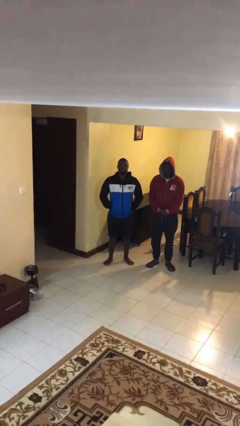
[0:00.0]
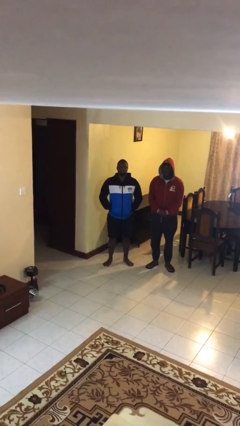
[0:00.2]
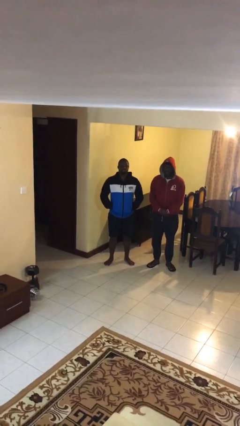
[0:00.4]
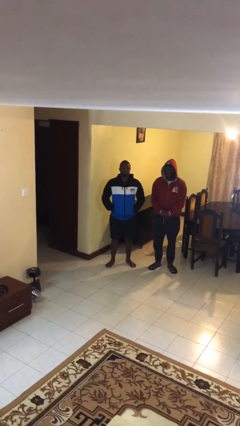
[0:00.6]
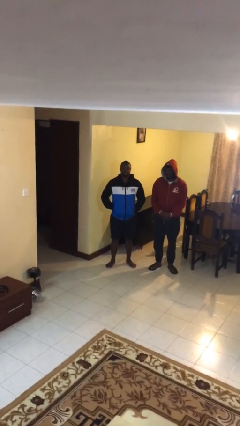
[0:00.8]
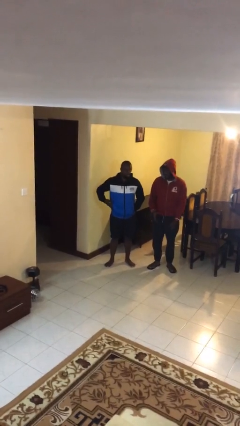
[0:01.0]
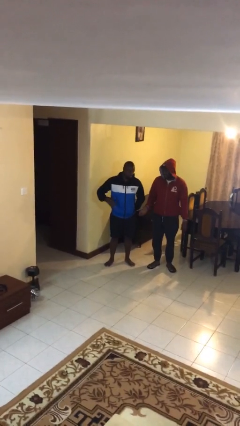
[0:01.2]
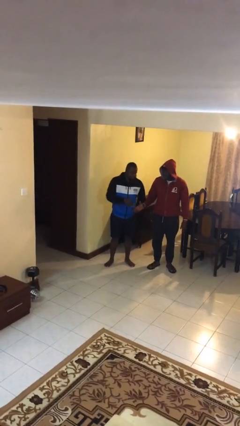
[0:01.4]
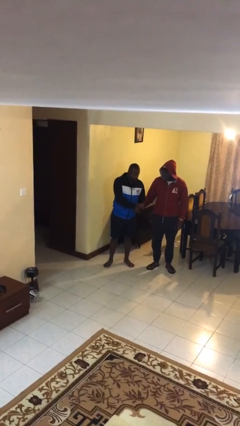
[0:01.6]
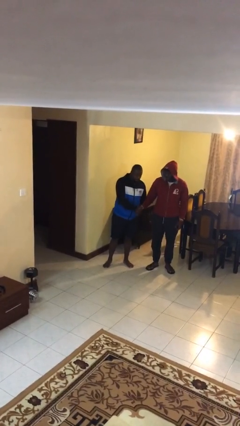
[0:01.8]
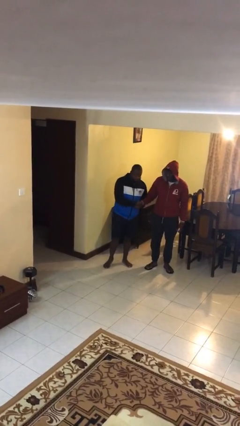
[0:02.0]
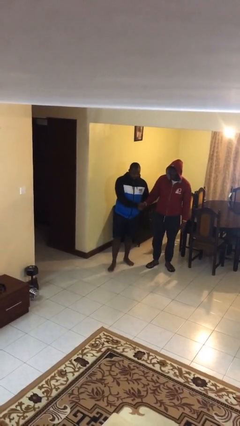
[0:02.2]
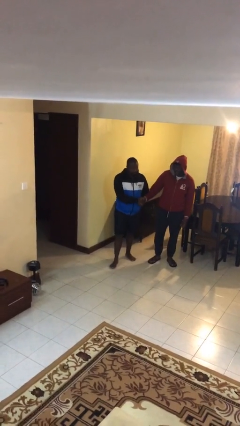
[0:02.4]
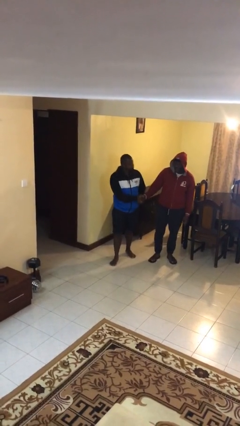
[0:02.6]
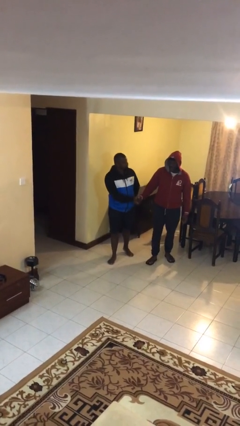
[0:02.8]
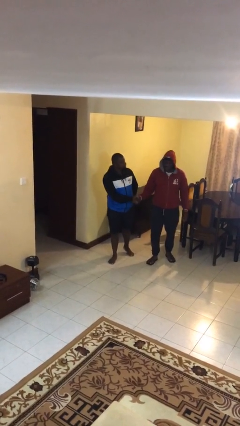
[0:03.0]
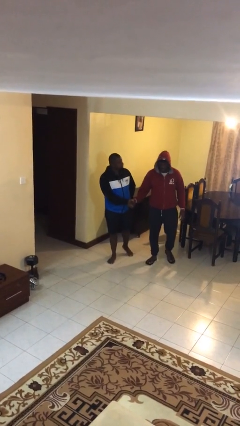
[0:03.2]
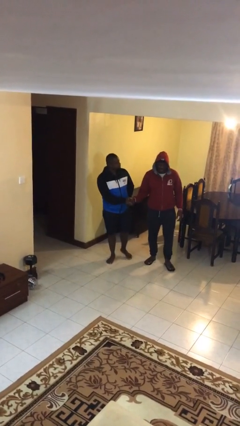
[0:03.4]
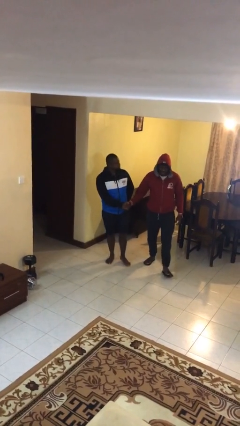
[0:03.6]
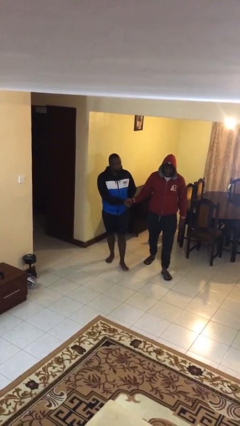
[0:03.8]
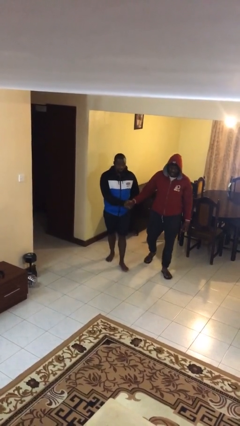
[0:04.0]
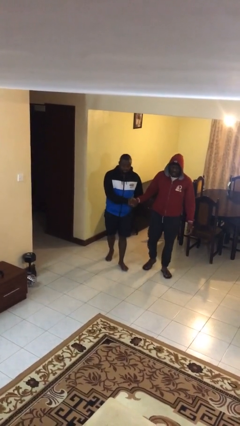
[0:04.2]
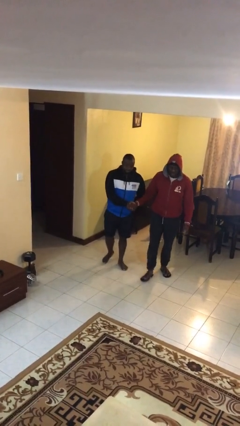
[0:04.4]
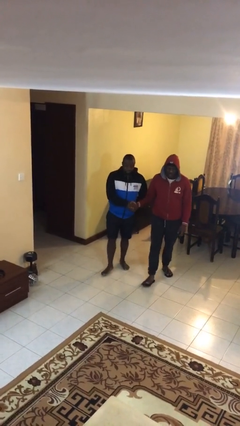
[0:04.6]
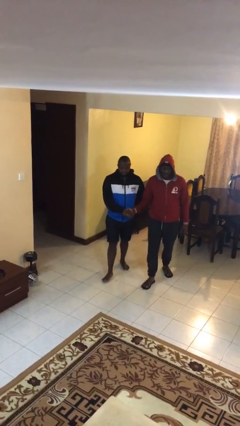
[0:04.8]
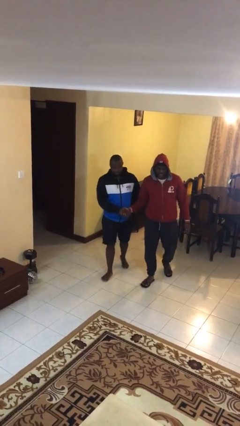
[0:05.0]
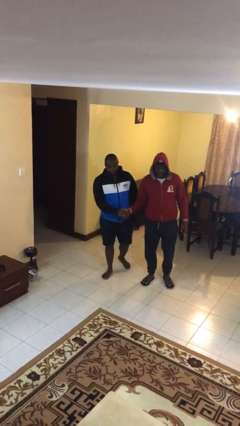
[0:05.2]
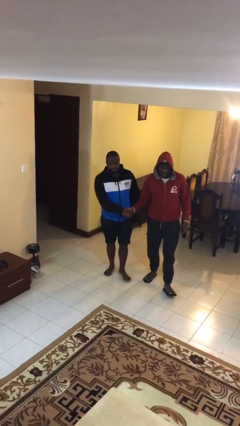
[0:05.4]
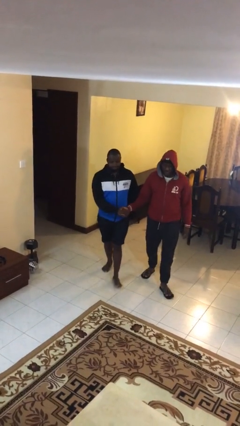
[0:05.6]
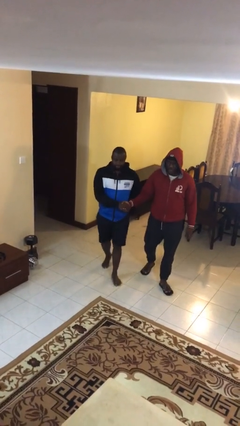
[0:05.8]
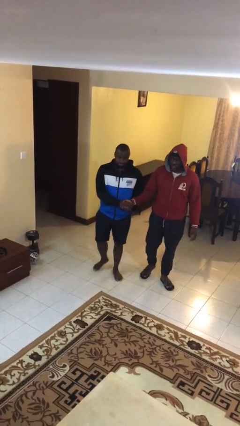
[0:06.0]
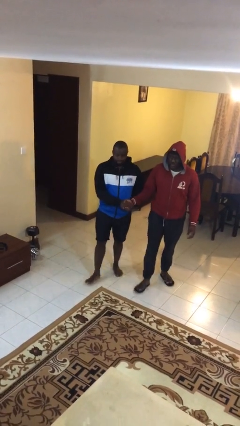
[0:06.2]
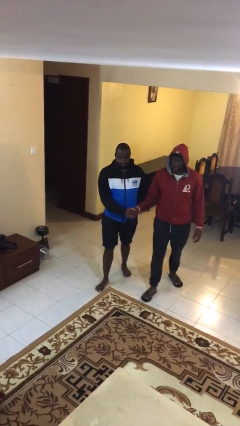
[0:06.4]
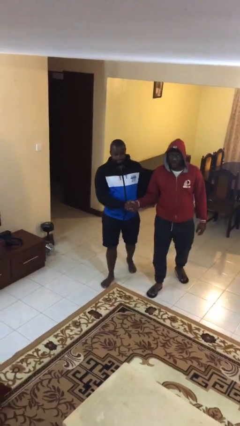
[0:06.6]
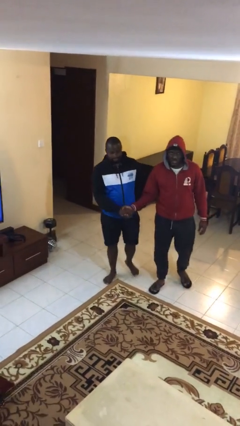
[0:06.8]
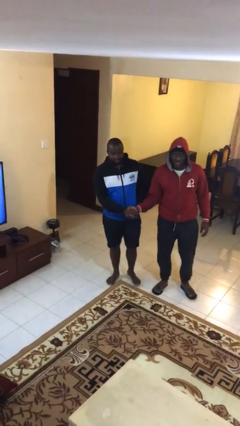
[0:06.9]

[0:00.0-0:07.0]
person holds hand

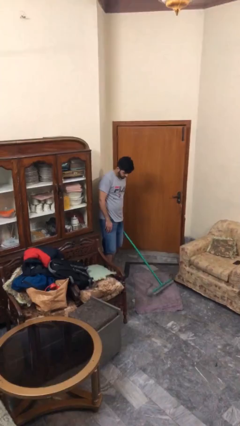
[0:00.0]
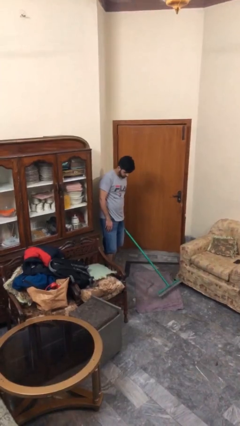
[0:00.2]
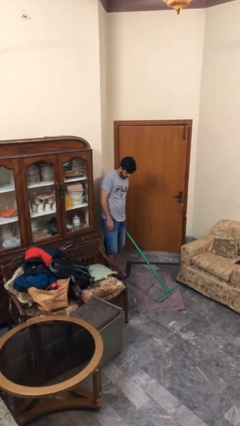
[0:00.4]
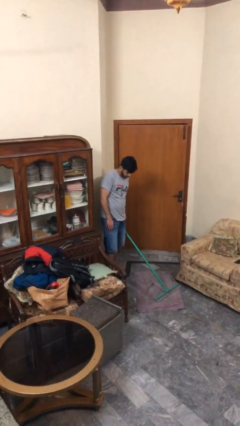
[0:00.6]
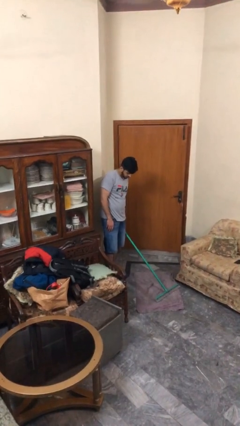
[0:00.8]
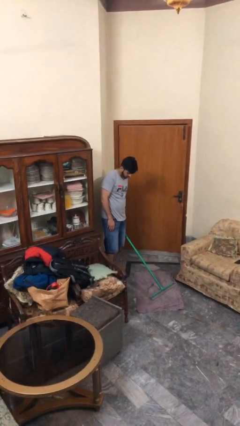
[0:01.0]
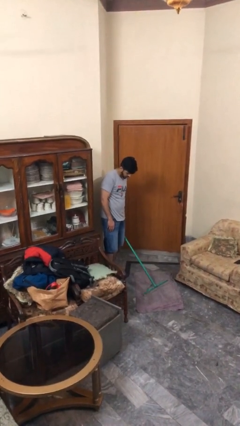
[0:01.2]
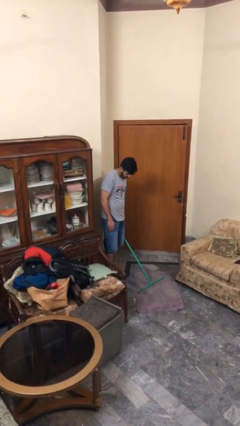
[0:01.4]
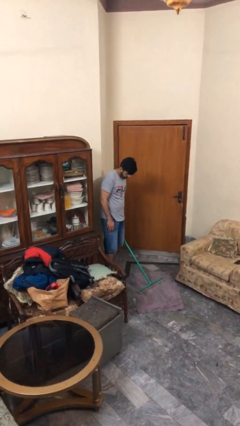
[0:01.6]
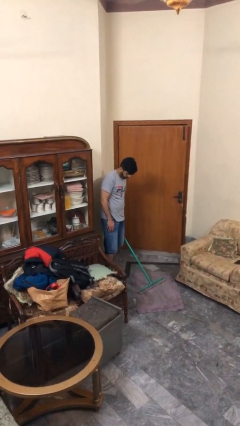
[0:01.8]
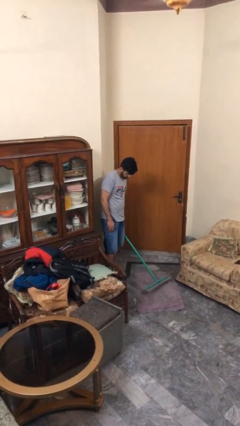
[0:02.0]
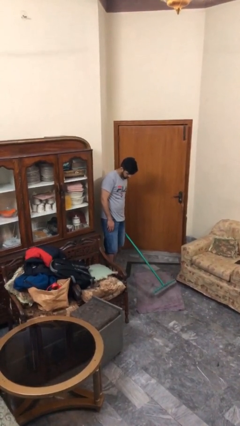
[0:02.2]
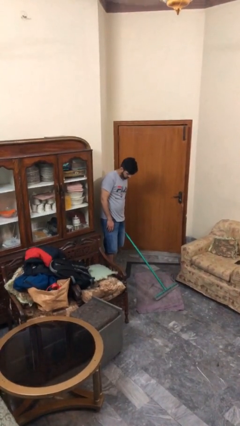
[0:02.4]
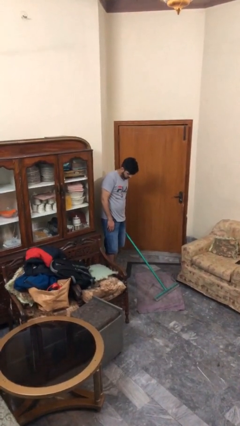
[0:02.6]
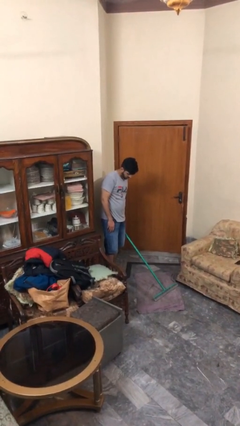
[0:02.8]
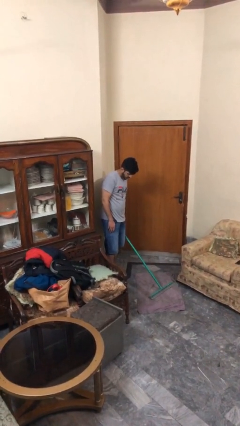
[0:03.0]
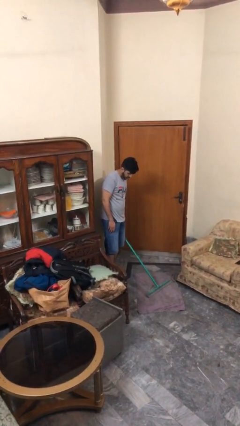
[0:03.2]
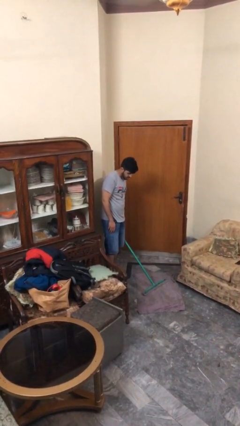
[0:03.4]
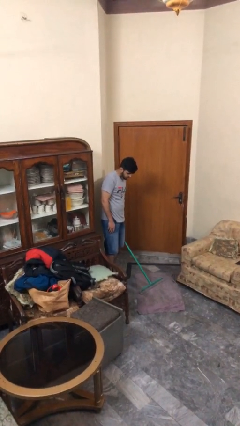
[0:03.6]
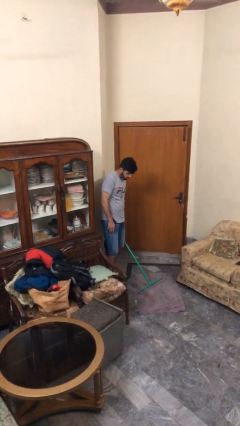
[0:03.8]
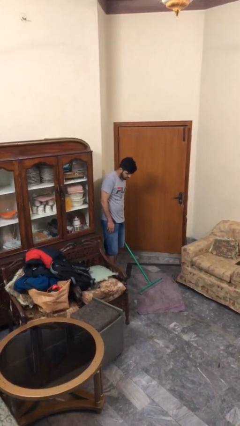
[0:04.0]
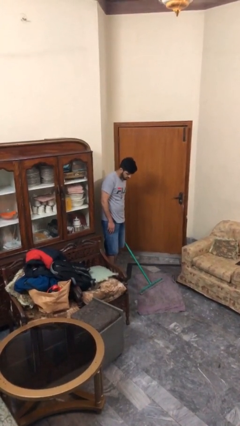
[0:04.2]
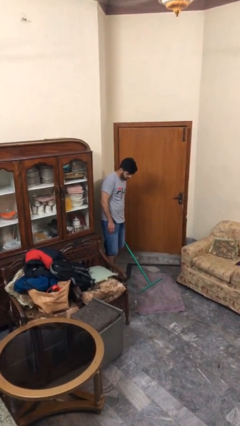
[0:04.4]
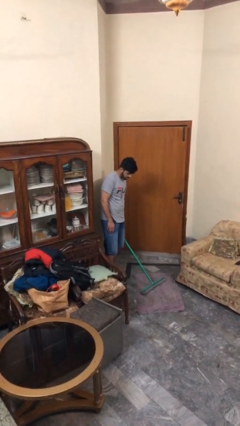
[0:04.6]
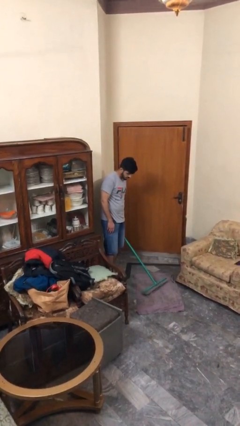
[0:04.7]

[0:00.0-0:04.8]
person vacuums carpet

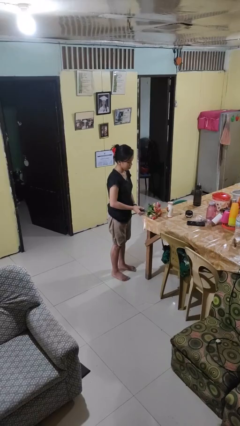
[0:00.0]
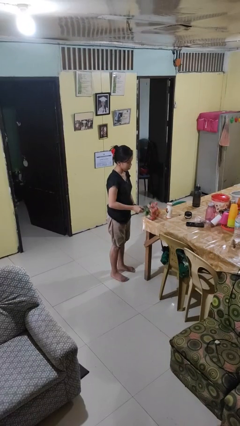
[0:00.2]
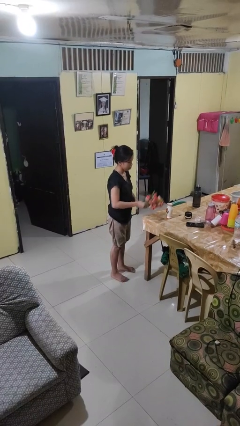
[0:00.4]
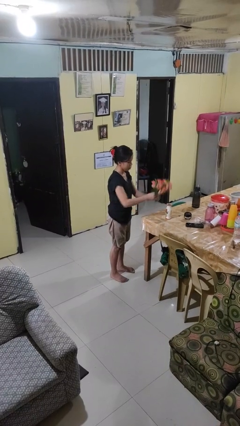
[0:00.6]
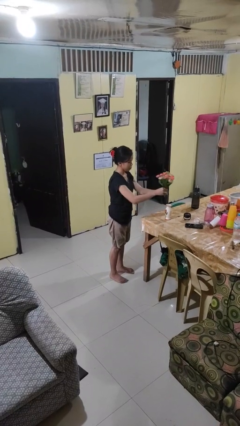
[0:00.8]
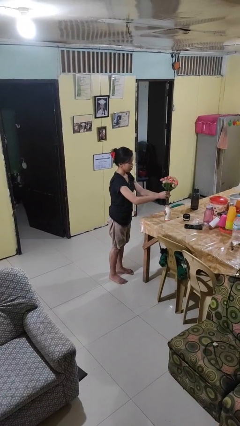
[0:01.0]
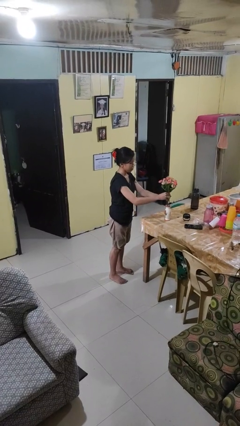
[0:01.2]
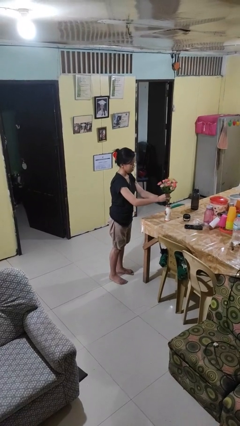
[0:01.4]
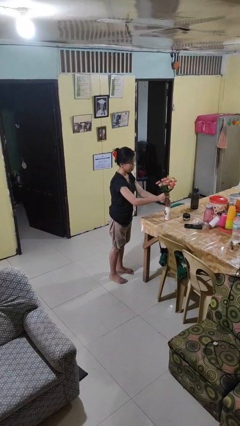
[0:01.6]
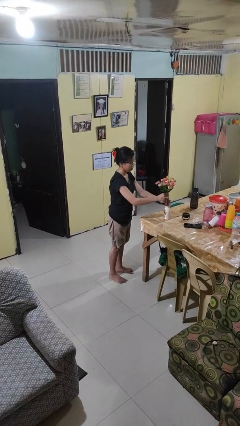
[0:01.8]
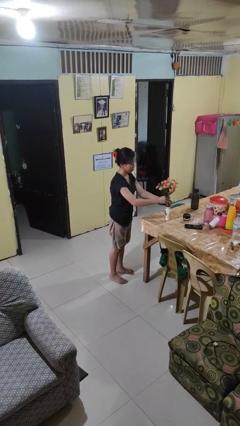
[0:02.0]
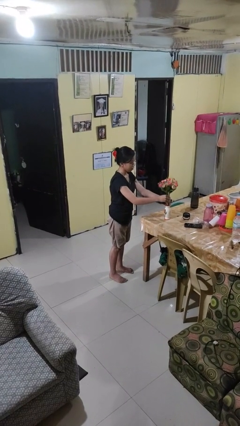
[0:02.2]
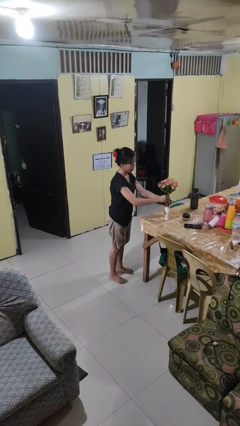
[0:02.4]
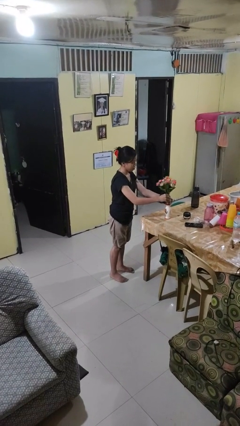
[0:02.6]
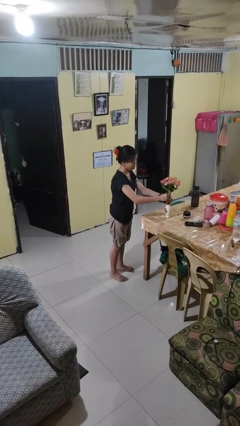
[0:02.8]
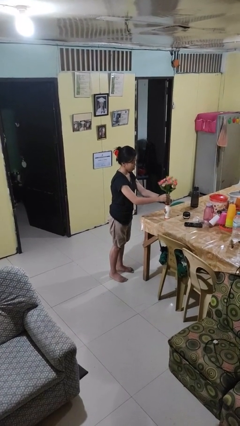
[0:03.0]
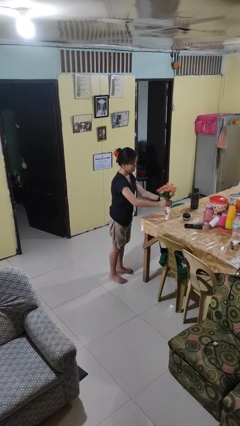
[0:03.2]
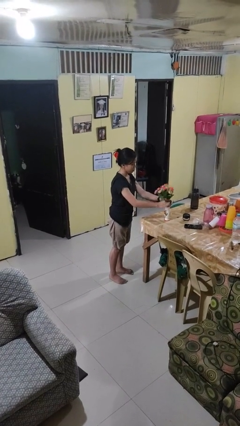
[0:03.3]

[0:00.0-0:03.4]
person arranges flowers in vase

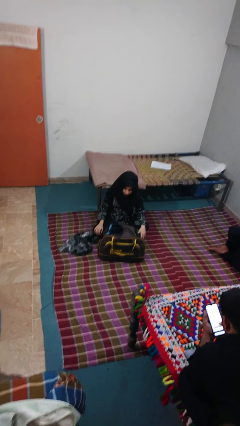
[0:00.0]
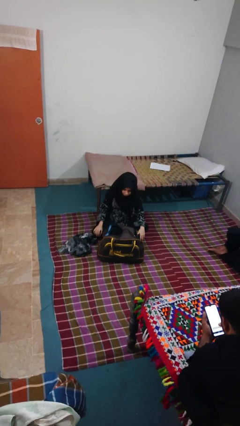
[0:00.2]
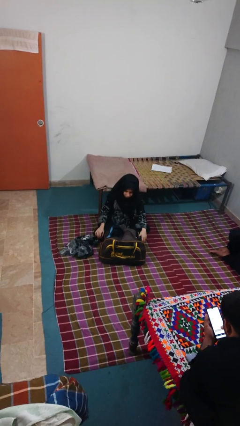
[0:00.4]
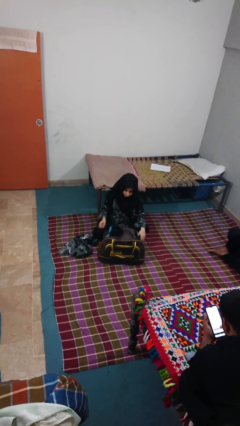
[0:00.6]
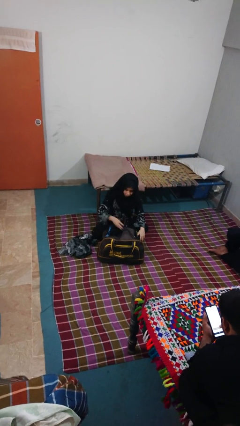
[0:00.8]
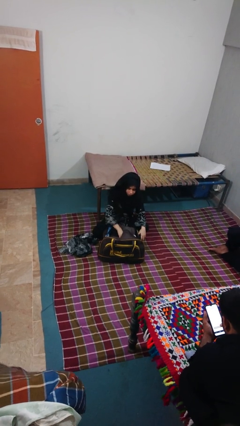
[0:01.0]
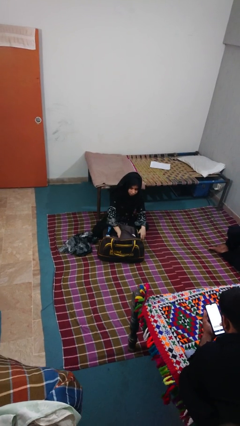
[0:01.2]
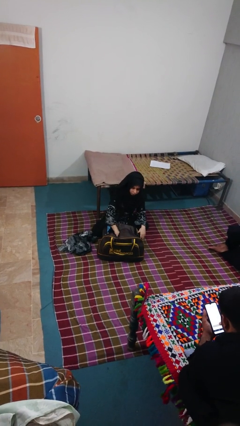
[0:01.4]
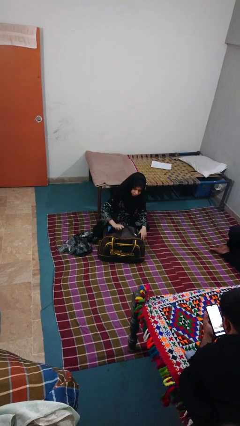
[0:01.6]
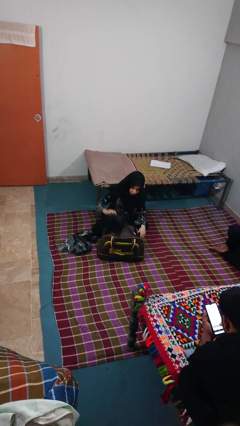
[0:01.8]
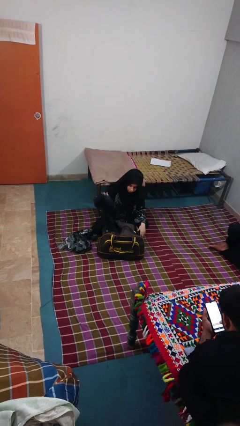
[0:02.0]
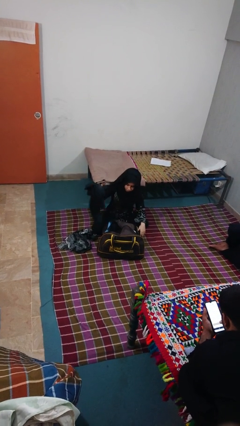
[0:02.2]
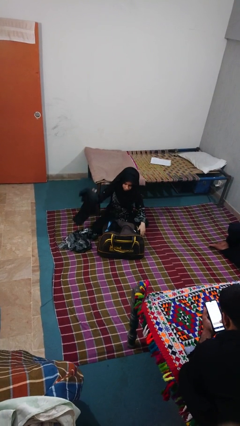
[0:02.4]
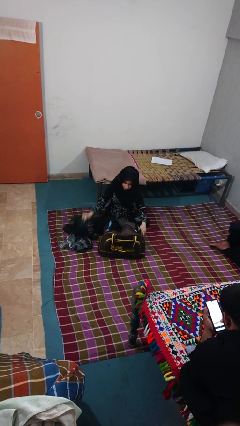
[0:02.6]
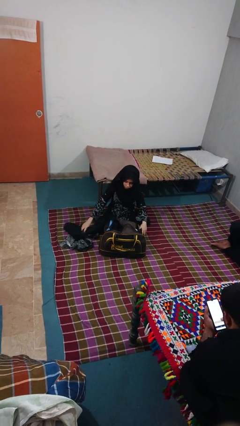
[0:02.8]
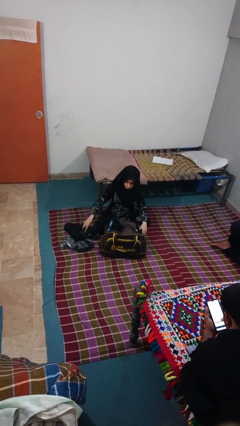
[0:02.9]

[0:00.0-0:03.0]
person unloads clothes from suitcase

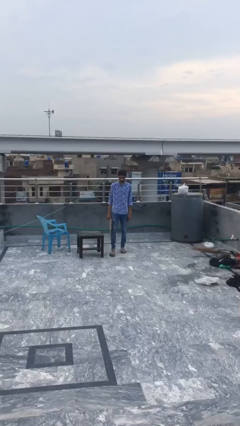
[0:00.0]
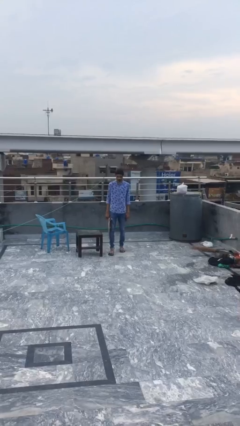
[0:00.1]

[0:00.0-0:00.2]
person puts down object on table
